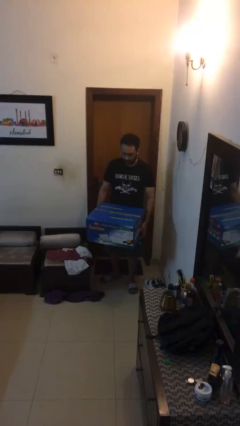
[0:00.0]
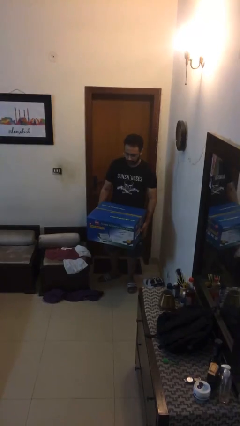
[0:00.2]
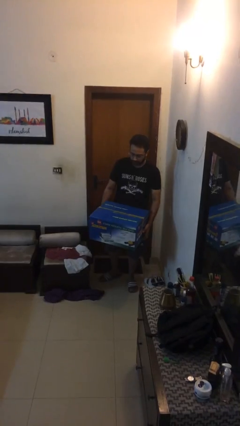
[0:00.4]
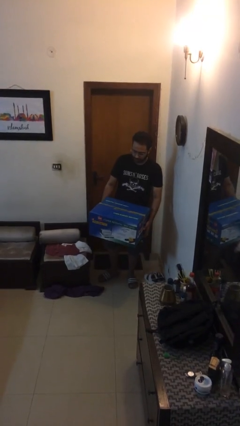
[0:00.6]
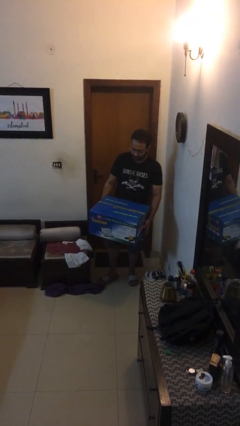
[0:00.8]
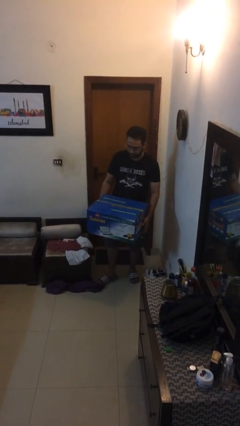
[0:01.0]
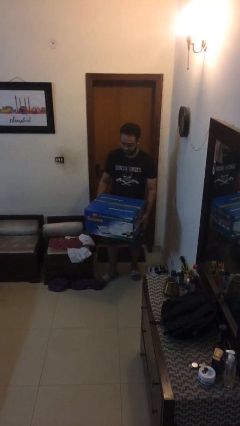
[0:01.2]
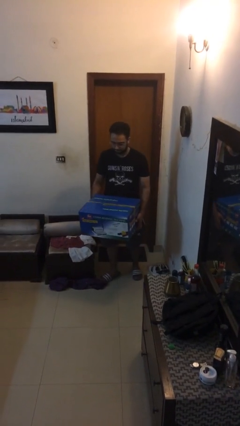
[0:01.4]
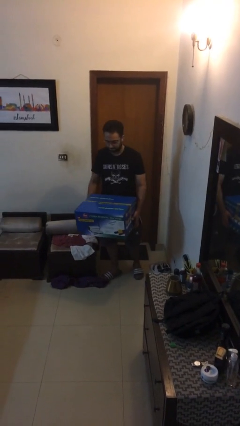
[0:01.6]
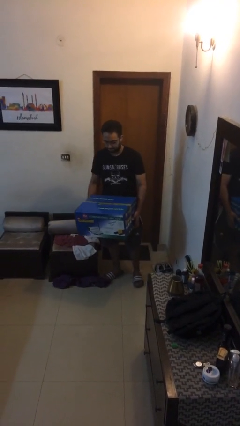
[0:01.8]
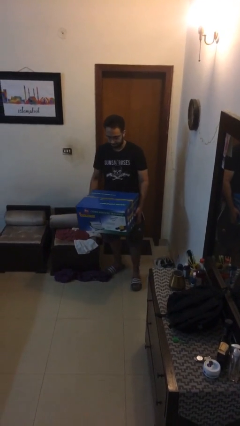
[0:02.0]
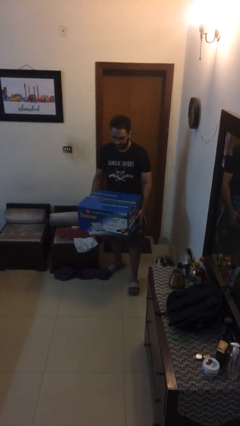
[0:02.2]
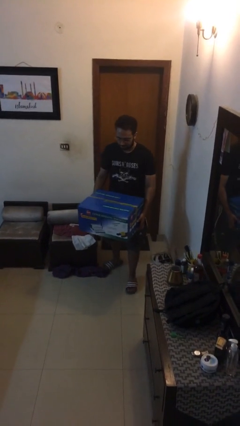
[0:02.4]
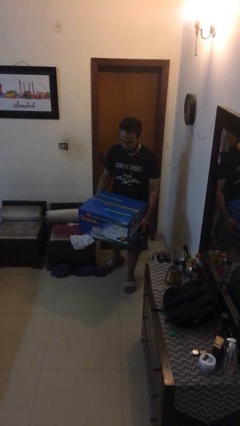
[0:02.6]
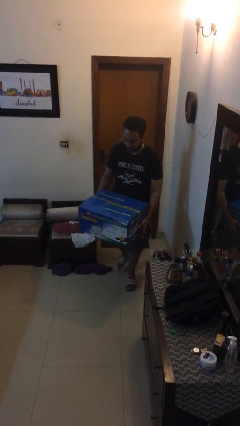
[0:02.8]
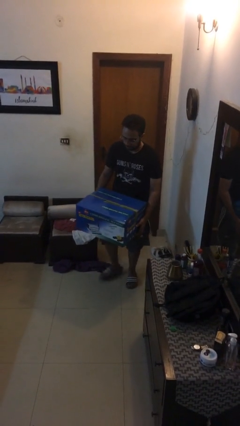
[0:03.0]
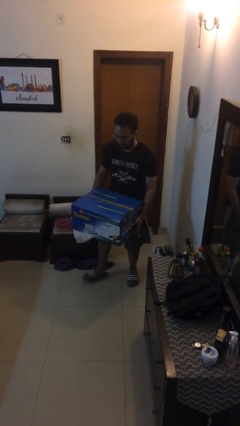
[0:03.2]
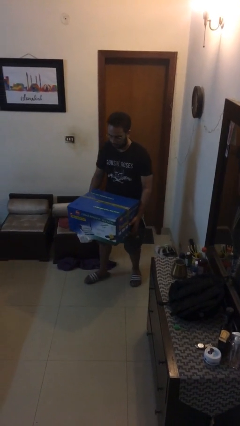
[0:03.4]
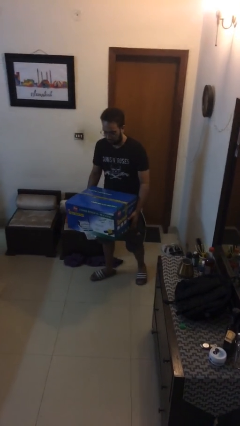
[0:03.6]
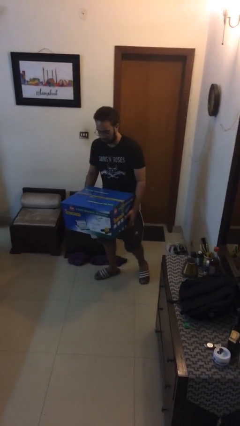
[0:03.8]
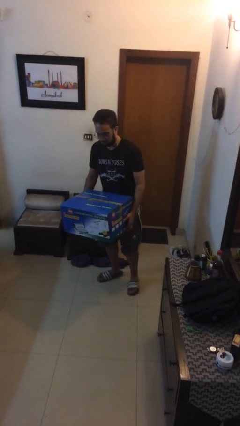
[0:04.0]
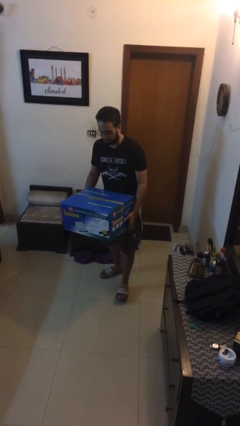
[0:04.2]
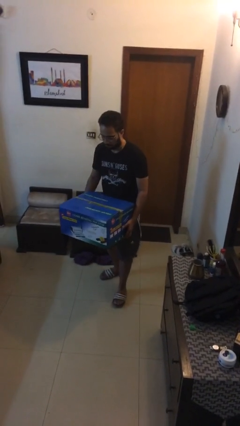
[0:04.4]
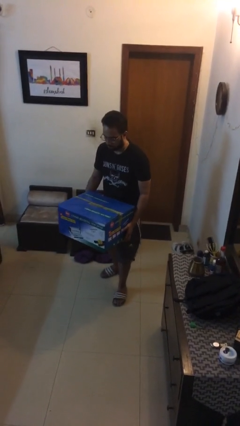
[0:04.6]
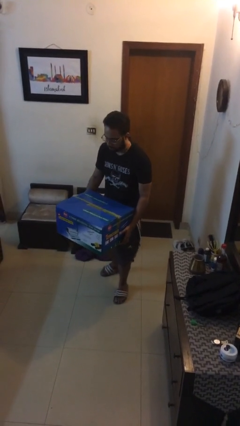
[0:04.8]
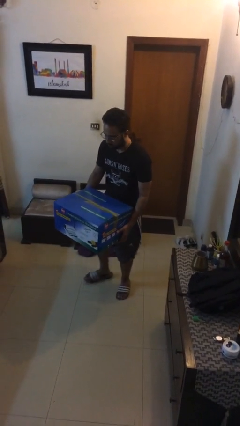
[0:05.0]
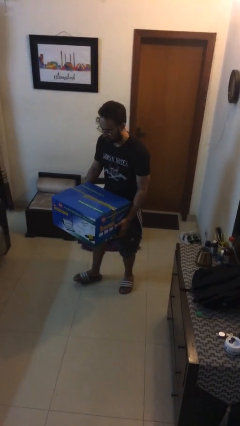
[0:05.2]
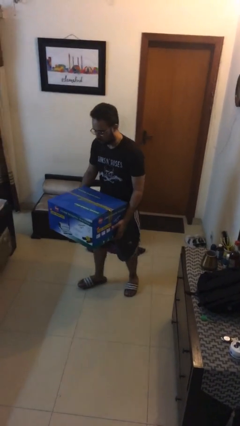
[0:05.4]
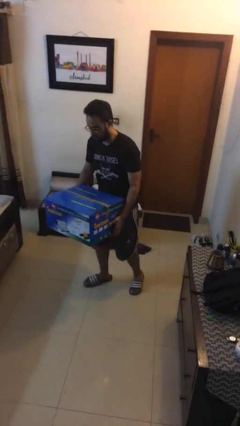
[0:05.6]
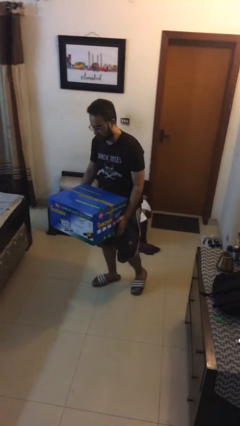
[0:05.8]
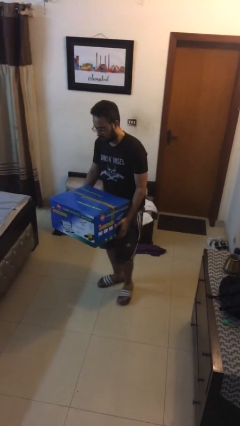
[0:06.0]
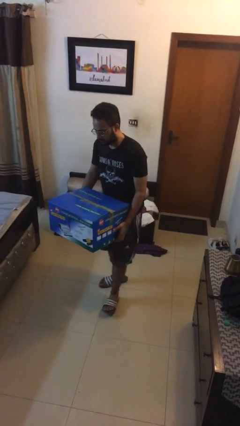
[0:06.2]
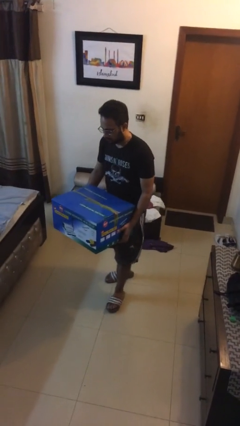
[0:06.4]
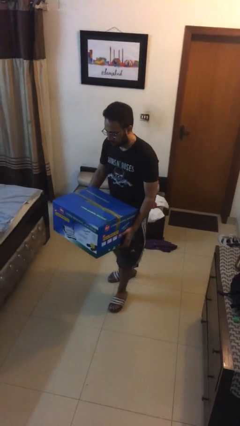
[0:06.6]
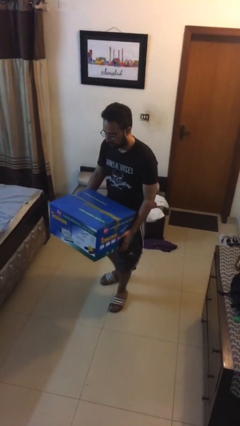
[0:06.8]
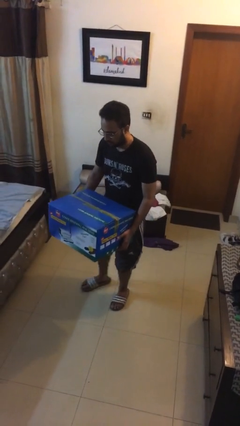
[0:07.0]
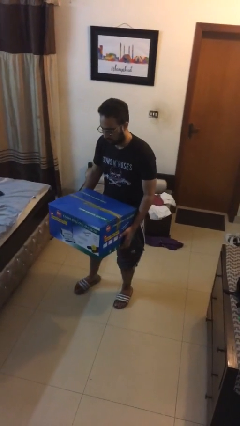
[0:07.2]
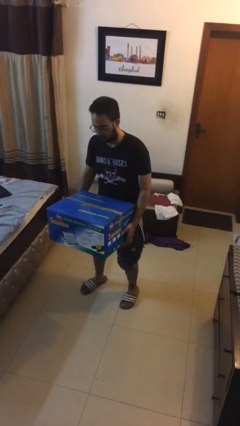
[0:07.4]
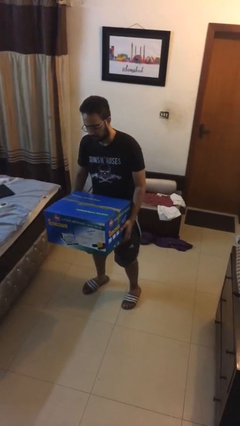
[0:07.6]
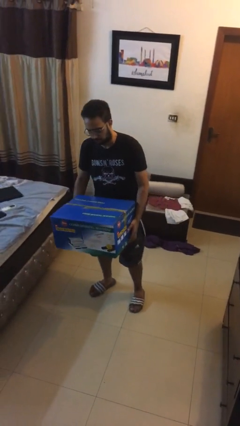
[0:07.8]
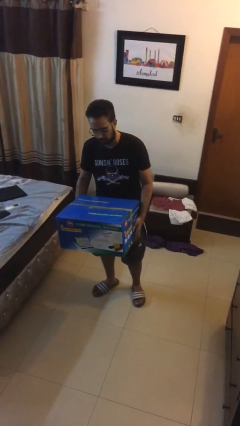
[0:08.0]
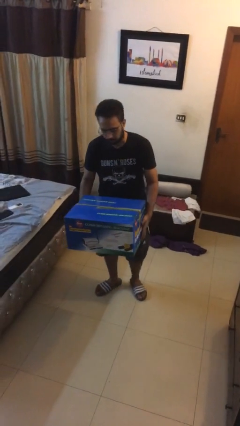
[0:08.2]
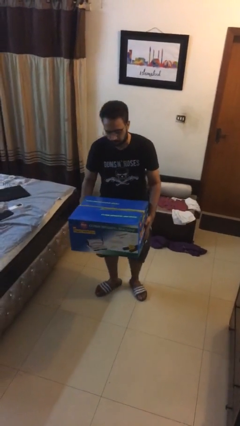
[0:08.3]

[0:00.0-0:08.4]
person carries heavy object

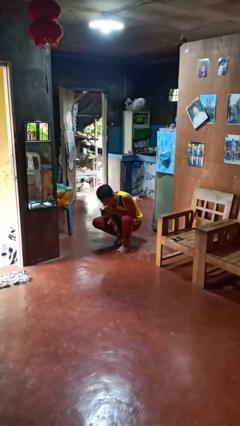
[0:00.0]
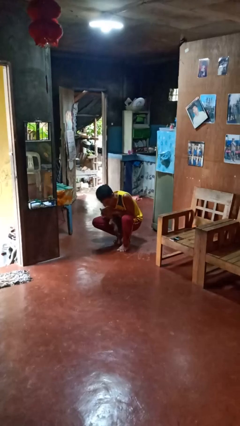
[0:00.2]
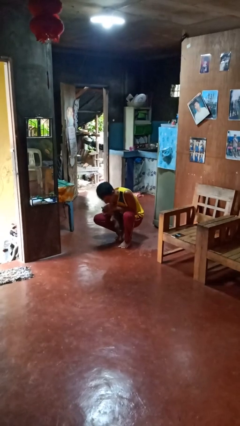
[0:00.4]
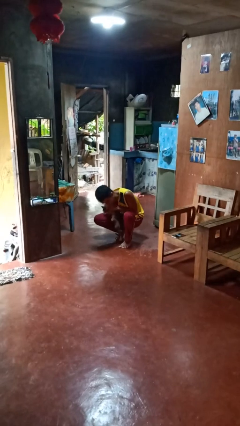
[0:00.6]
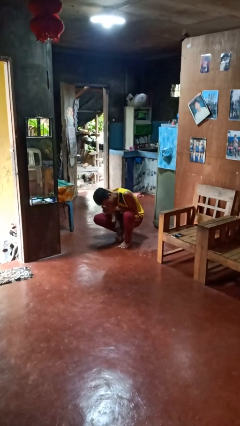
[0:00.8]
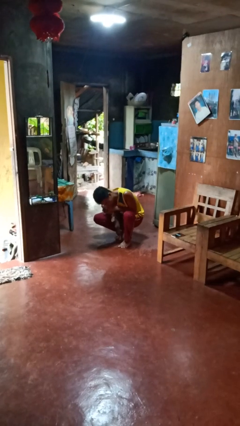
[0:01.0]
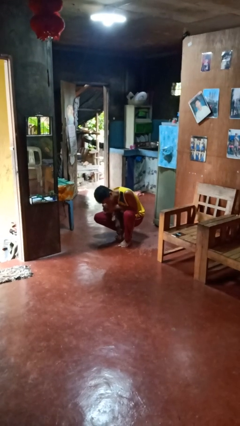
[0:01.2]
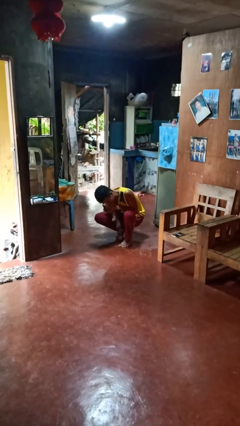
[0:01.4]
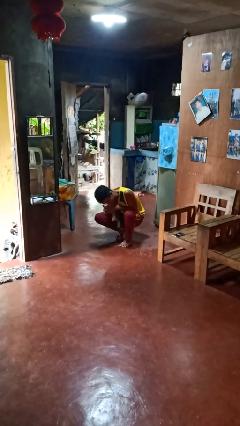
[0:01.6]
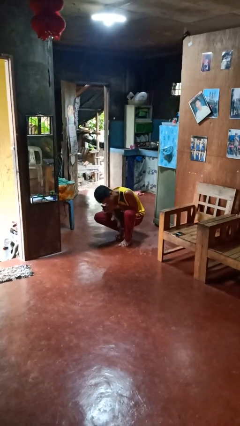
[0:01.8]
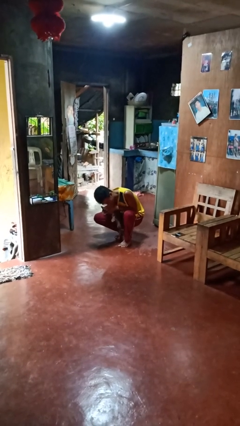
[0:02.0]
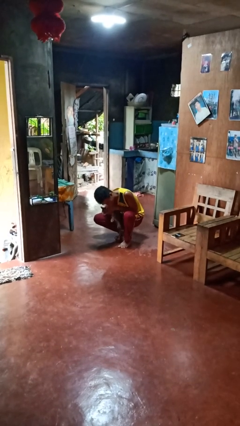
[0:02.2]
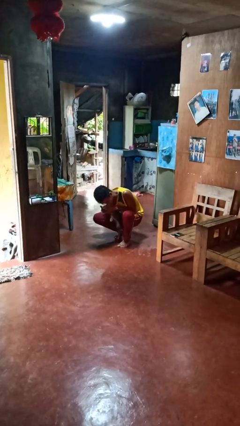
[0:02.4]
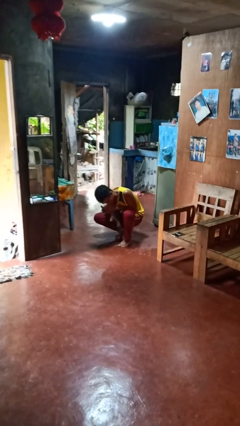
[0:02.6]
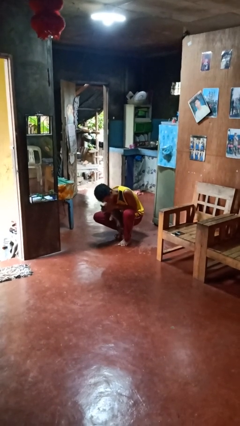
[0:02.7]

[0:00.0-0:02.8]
person hugs cat

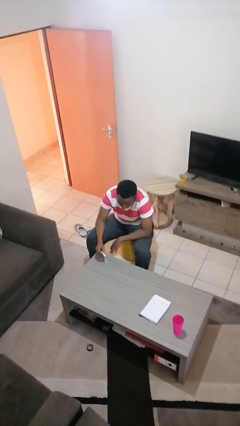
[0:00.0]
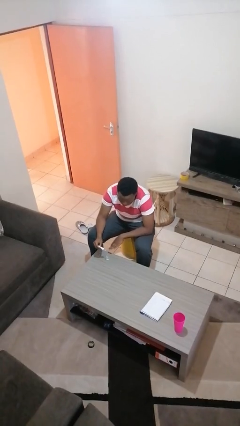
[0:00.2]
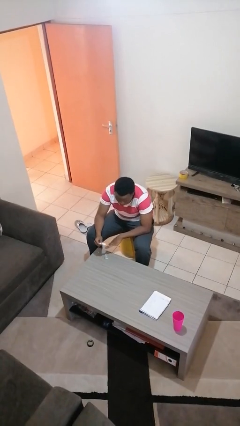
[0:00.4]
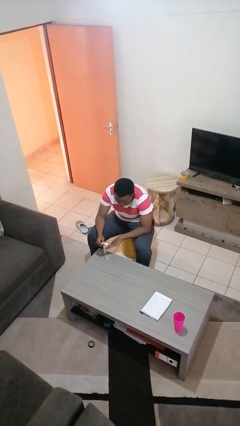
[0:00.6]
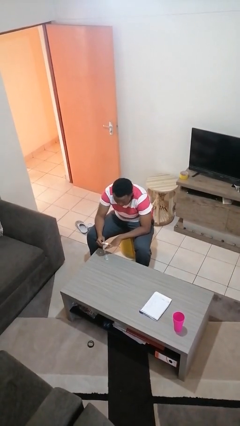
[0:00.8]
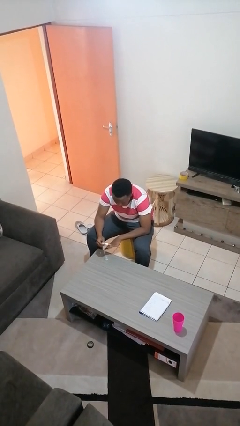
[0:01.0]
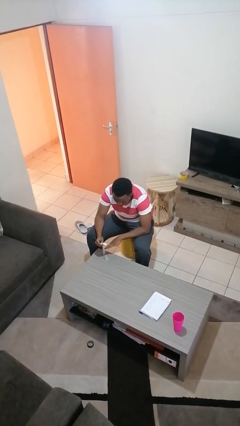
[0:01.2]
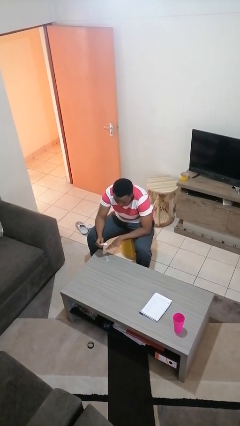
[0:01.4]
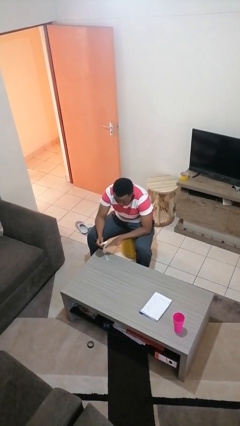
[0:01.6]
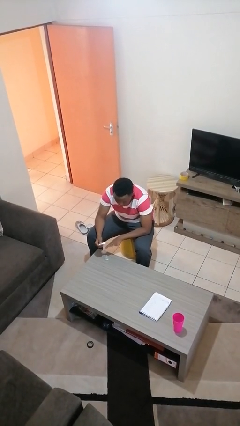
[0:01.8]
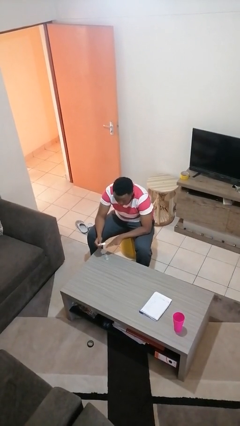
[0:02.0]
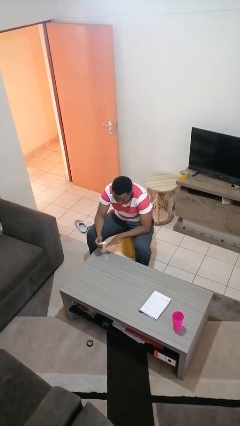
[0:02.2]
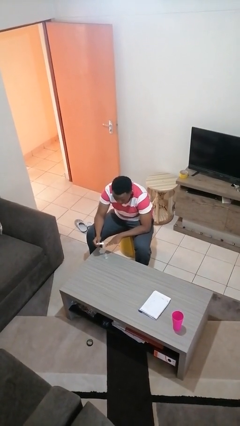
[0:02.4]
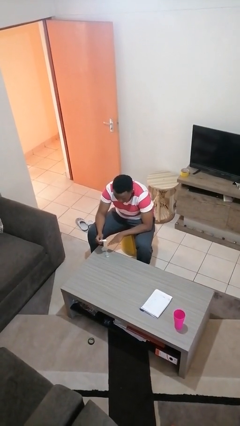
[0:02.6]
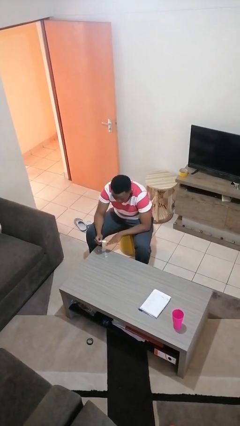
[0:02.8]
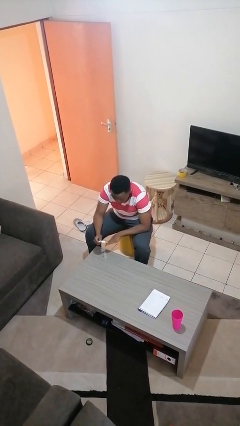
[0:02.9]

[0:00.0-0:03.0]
person paints fingernails

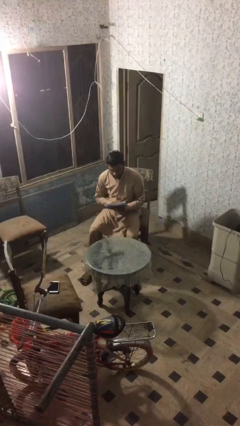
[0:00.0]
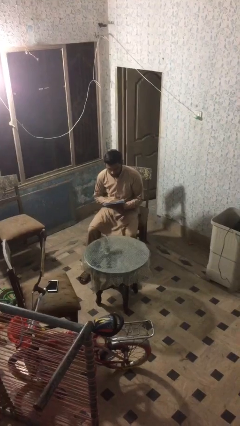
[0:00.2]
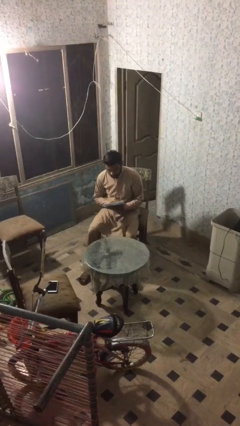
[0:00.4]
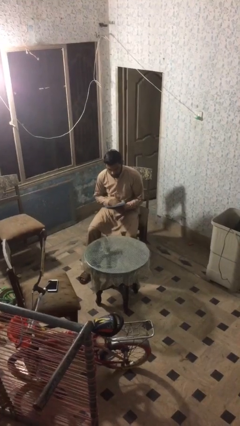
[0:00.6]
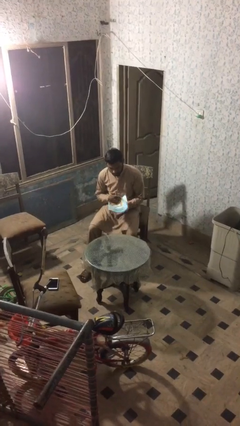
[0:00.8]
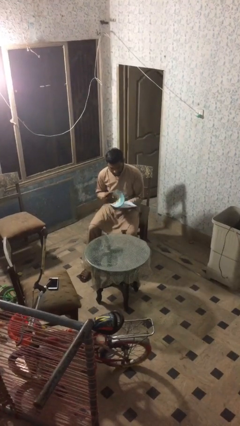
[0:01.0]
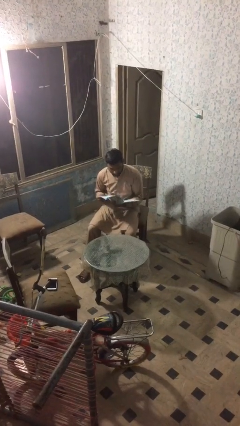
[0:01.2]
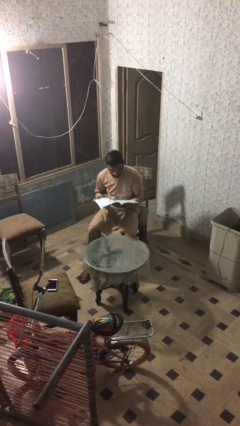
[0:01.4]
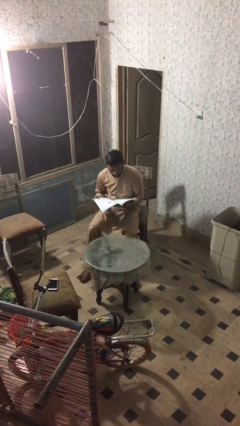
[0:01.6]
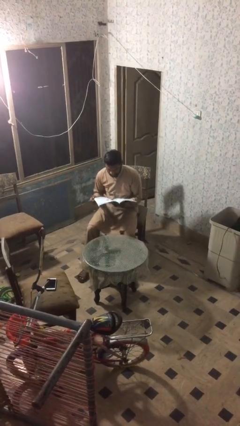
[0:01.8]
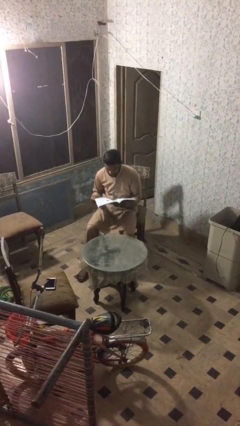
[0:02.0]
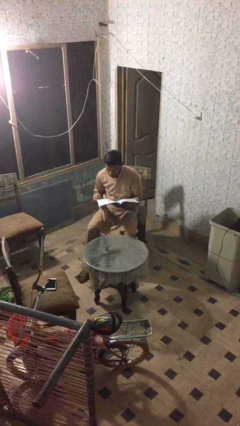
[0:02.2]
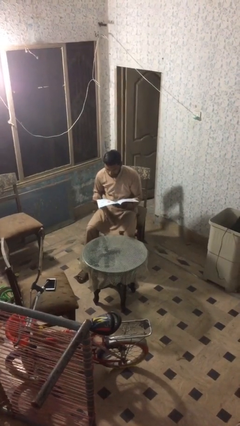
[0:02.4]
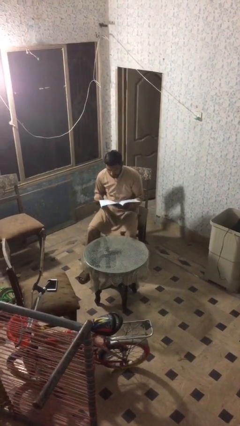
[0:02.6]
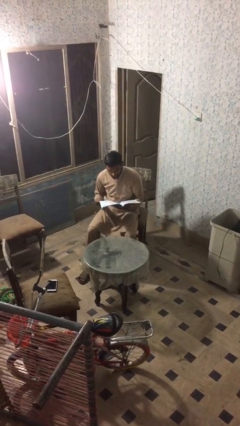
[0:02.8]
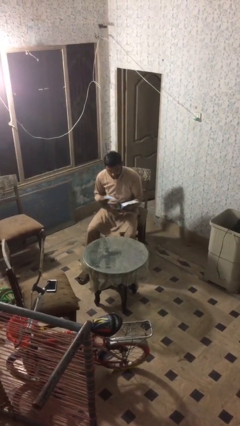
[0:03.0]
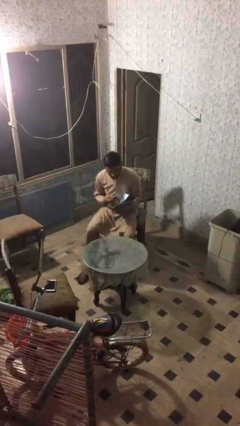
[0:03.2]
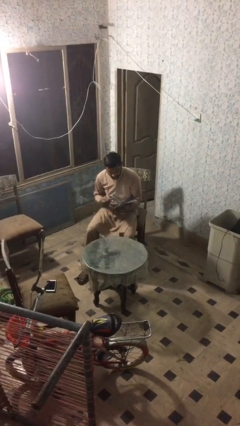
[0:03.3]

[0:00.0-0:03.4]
person reads document

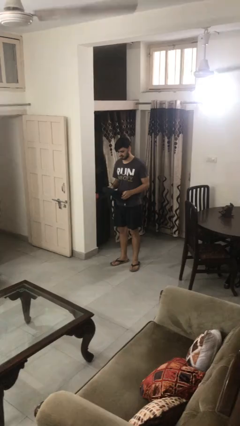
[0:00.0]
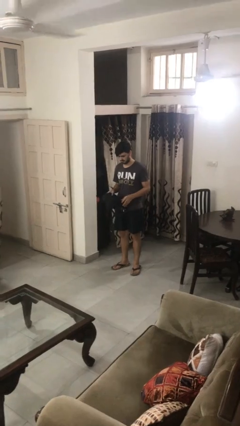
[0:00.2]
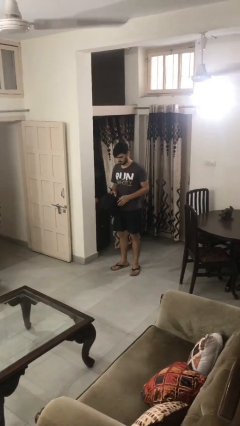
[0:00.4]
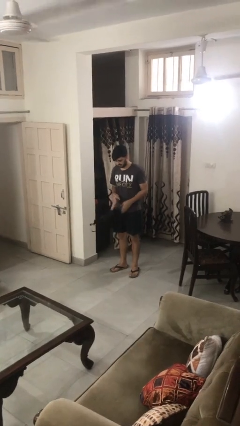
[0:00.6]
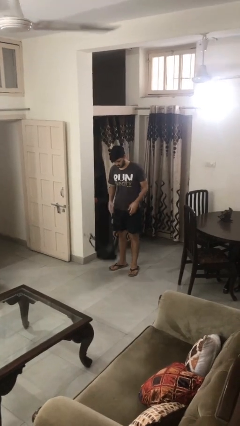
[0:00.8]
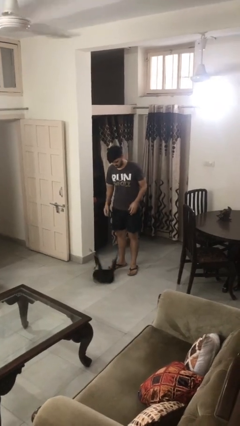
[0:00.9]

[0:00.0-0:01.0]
person drops object
